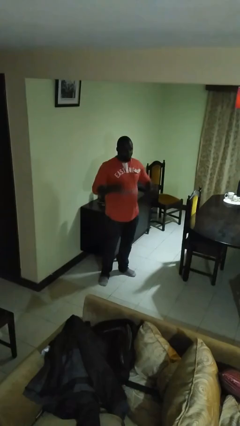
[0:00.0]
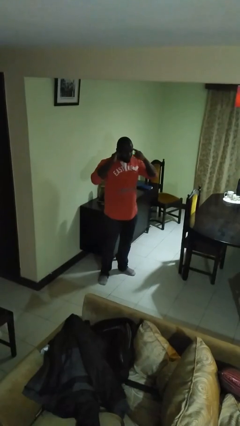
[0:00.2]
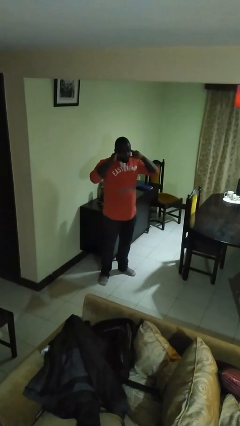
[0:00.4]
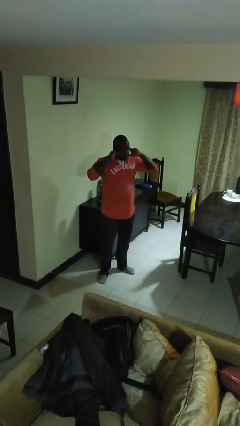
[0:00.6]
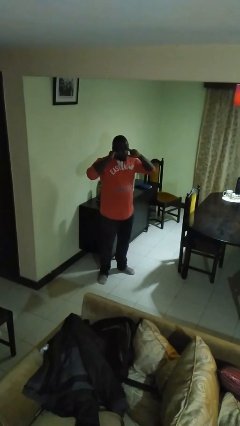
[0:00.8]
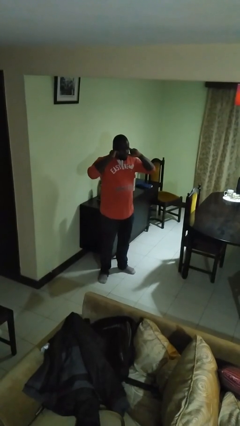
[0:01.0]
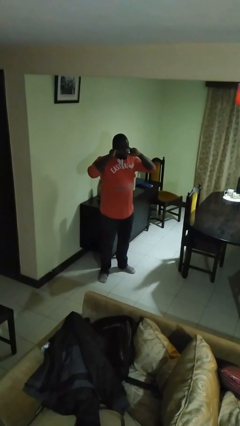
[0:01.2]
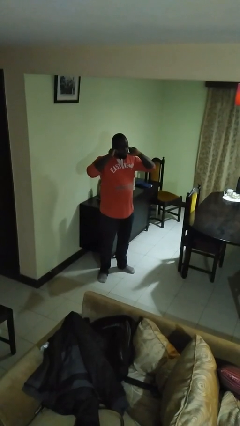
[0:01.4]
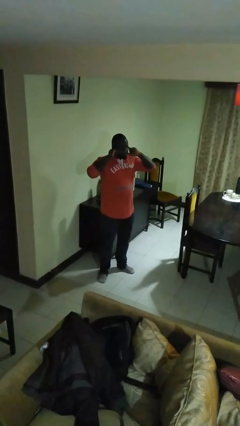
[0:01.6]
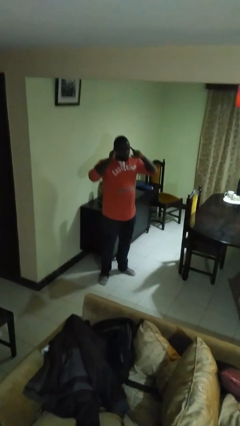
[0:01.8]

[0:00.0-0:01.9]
person puts fingers in ear

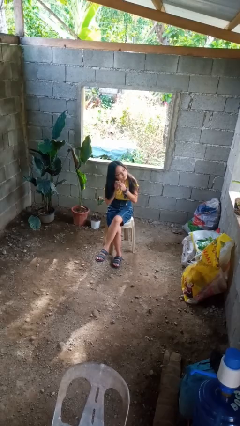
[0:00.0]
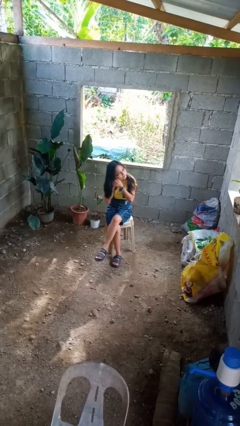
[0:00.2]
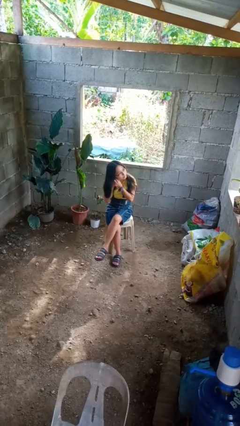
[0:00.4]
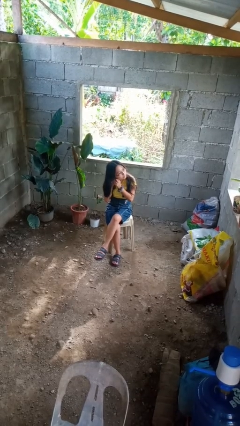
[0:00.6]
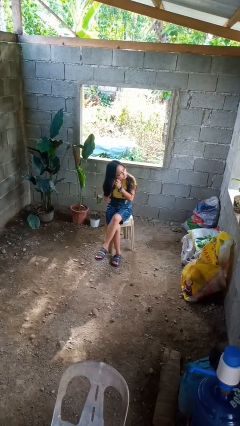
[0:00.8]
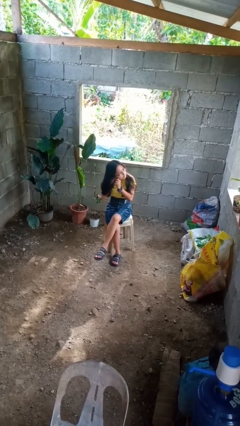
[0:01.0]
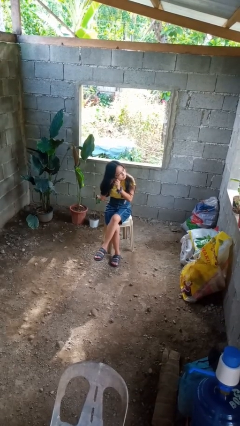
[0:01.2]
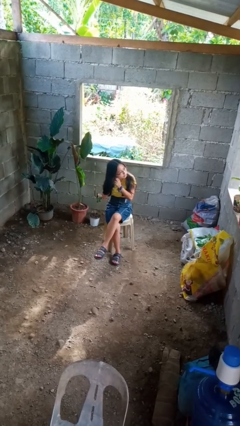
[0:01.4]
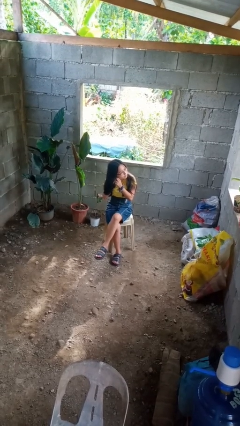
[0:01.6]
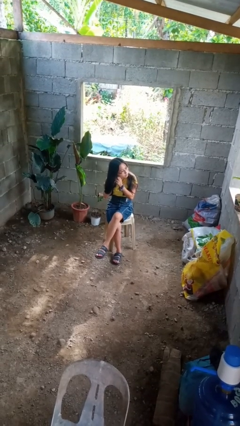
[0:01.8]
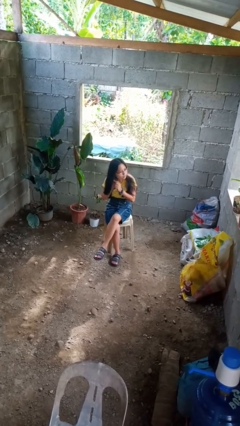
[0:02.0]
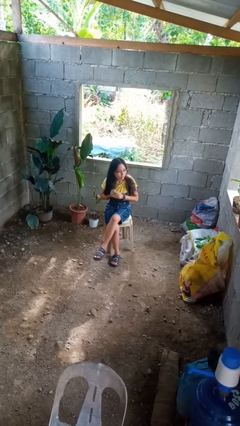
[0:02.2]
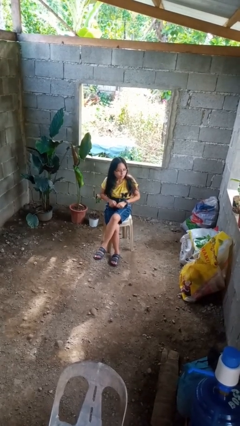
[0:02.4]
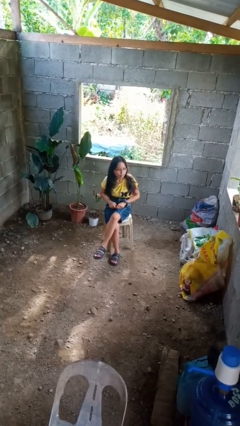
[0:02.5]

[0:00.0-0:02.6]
person puts on earrings

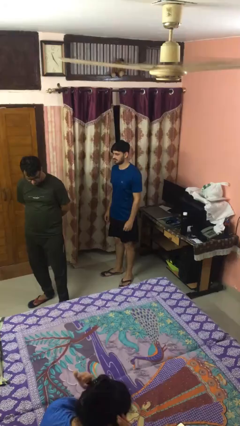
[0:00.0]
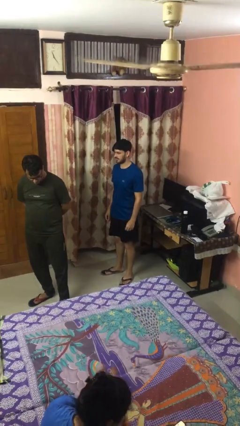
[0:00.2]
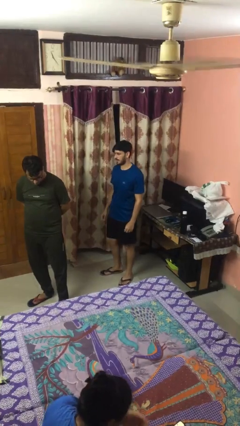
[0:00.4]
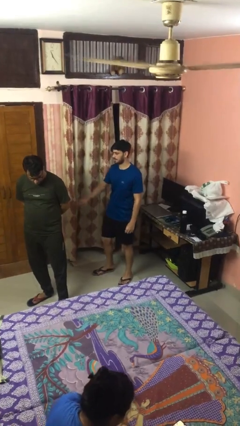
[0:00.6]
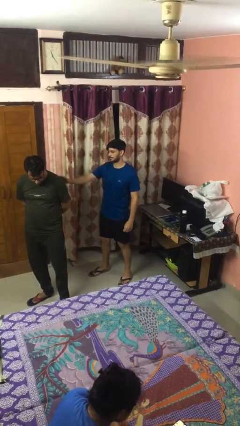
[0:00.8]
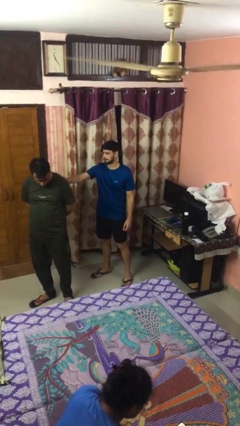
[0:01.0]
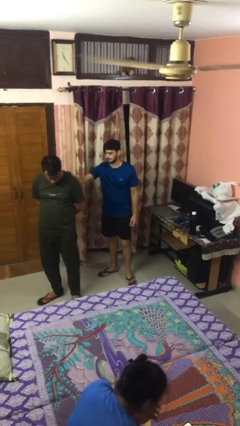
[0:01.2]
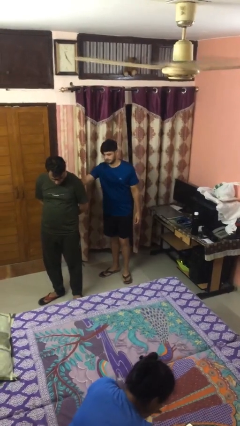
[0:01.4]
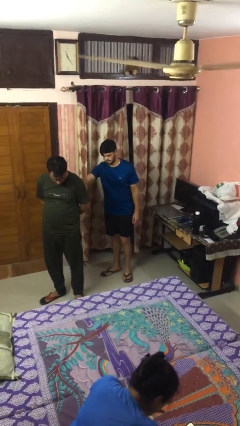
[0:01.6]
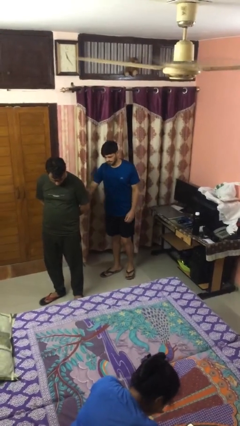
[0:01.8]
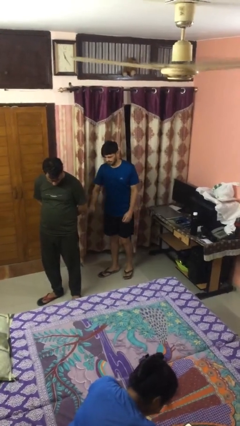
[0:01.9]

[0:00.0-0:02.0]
person touches back of person

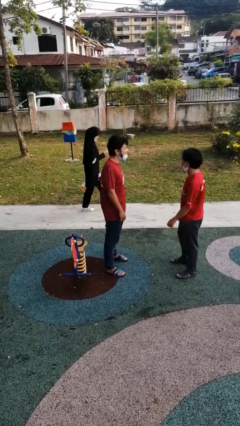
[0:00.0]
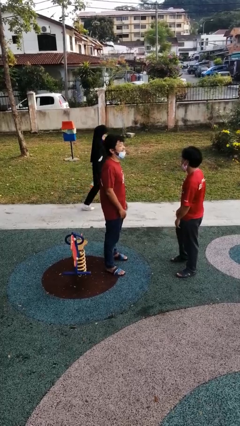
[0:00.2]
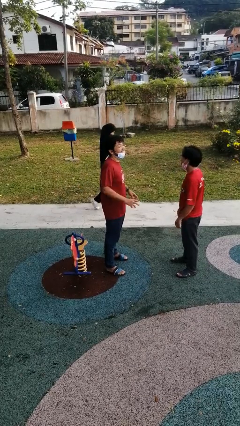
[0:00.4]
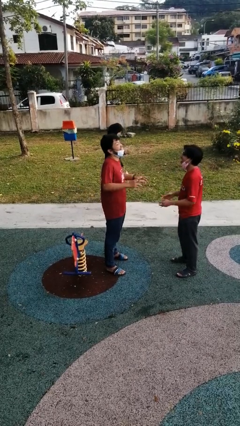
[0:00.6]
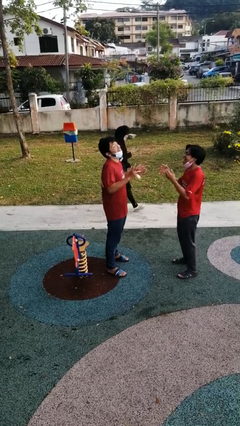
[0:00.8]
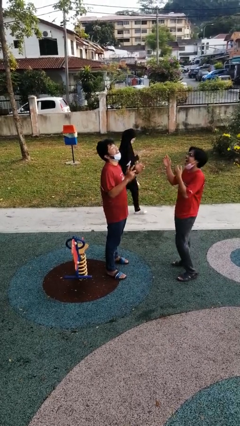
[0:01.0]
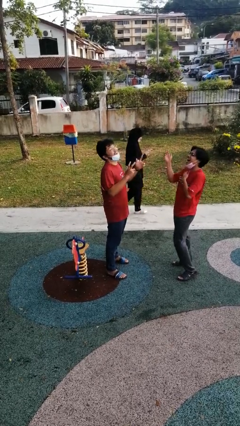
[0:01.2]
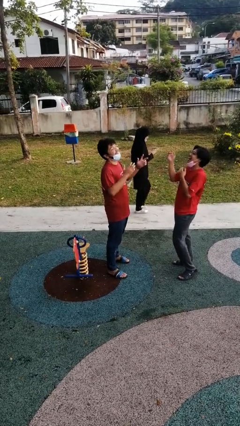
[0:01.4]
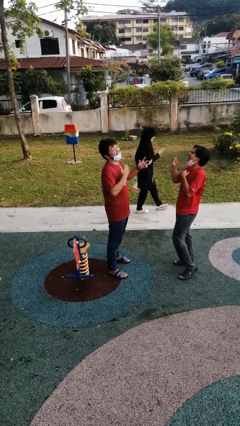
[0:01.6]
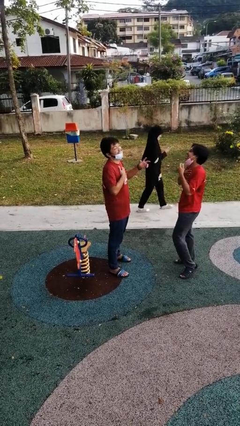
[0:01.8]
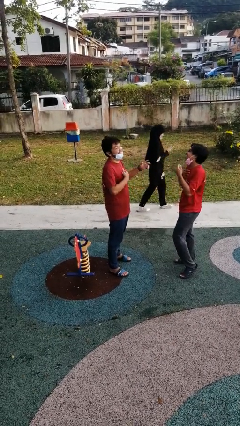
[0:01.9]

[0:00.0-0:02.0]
person laughs with person

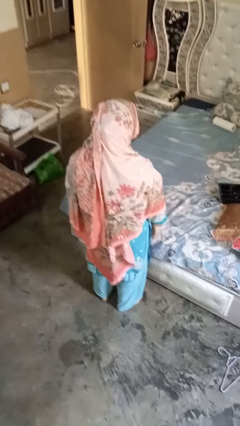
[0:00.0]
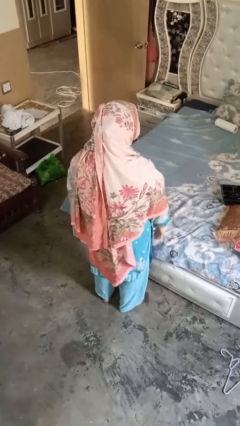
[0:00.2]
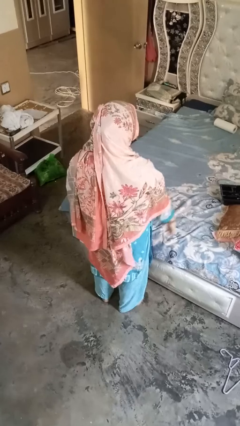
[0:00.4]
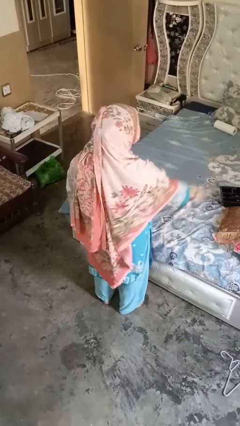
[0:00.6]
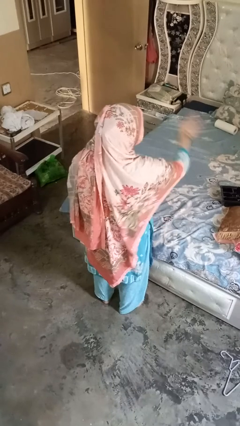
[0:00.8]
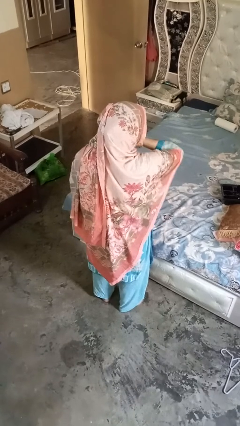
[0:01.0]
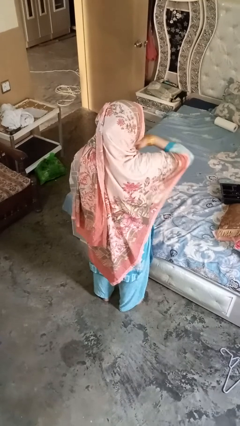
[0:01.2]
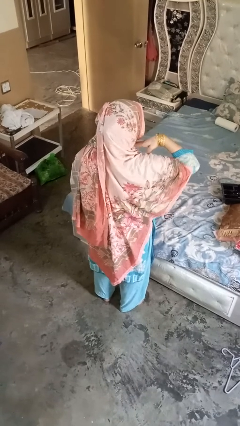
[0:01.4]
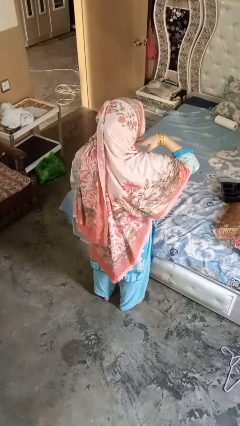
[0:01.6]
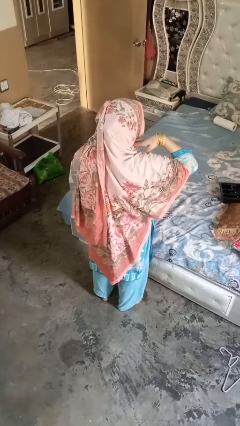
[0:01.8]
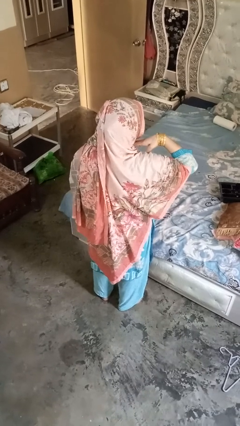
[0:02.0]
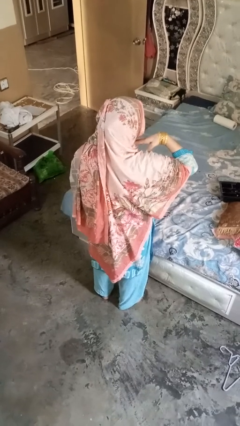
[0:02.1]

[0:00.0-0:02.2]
person gestures cut

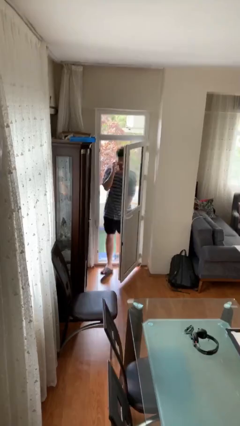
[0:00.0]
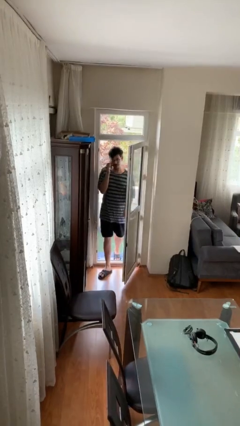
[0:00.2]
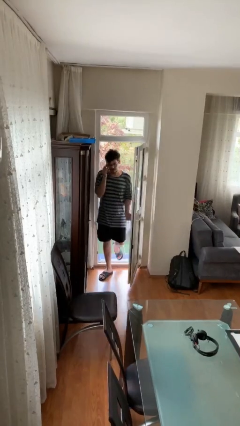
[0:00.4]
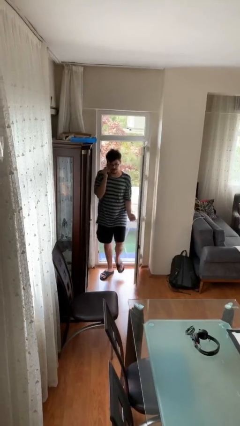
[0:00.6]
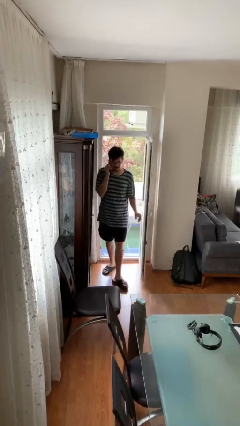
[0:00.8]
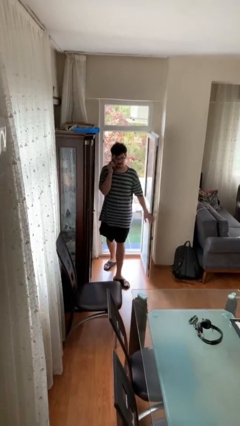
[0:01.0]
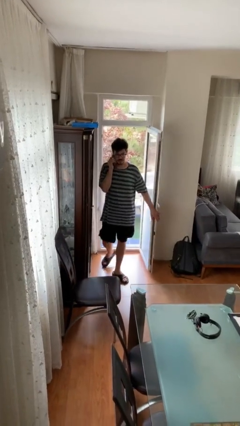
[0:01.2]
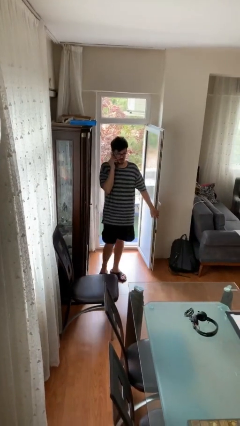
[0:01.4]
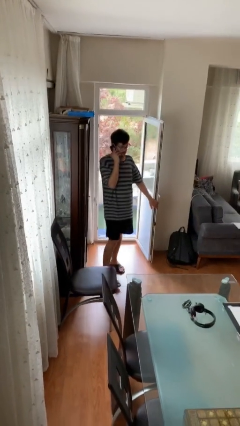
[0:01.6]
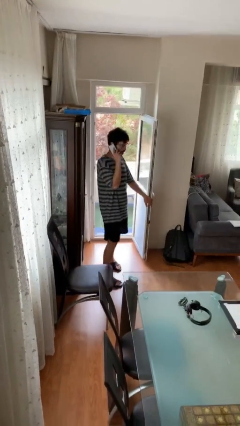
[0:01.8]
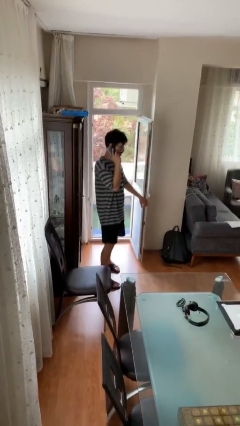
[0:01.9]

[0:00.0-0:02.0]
person enters scene through structure

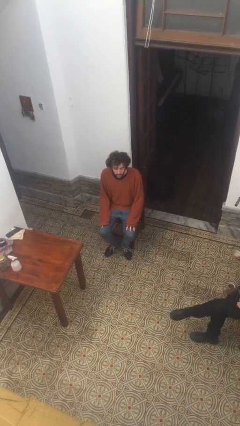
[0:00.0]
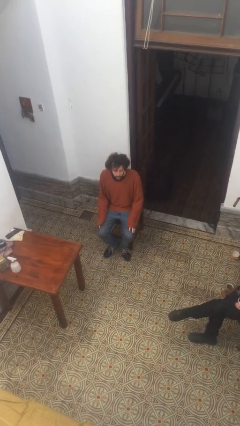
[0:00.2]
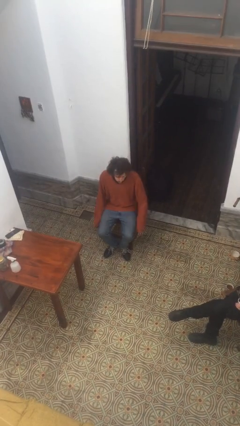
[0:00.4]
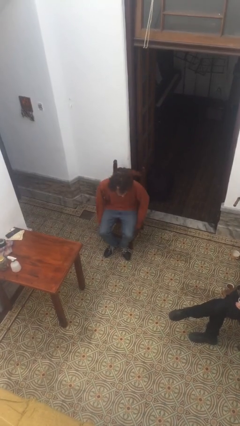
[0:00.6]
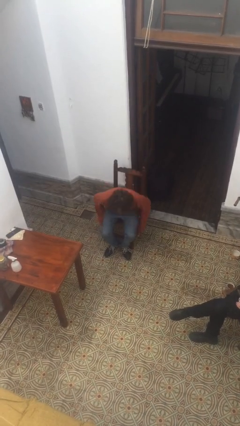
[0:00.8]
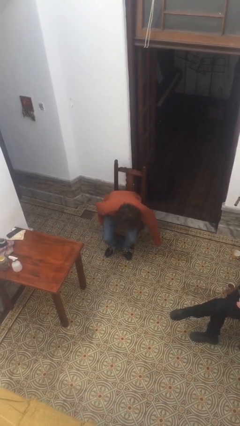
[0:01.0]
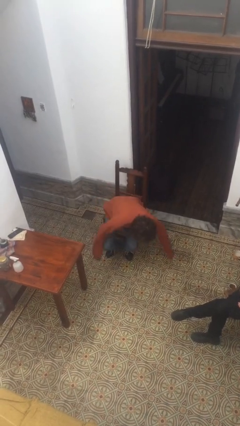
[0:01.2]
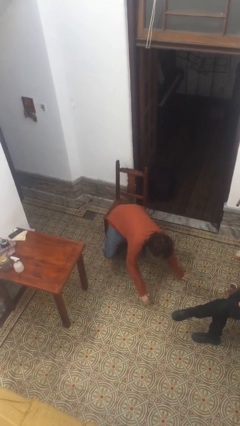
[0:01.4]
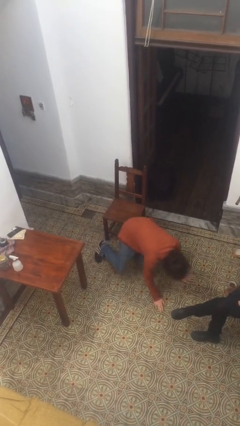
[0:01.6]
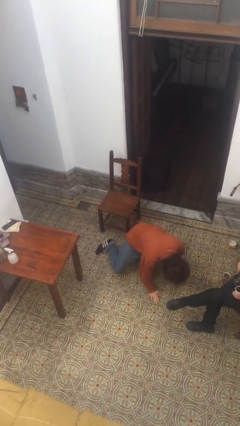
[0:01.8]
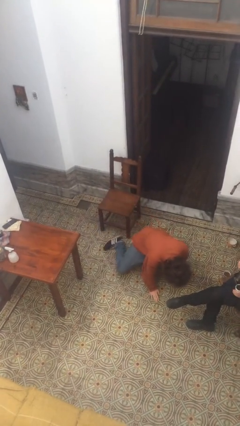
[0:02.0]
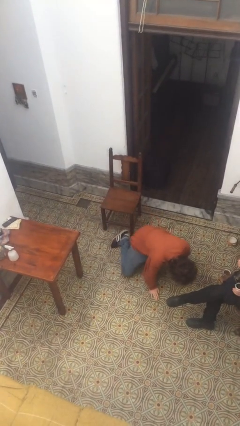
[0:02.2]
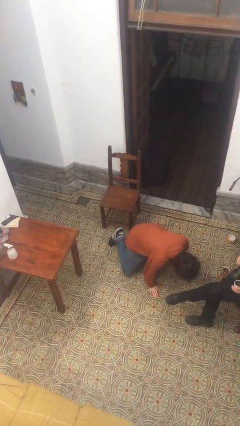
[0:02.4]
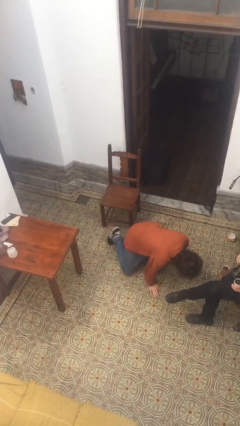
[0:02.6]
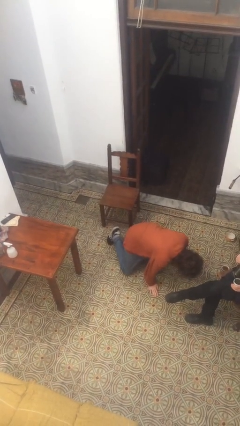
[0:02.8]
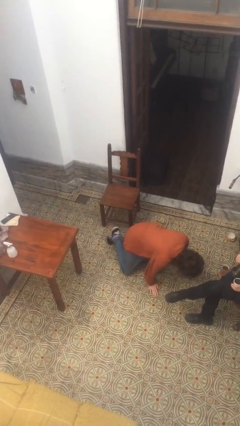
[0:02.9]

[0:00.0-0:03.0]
person falls from chair

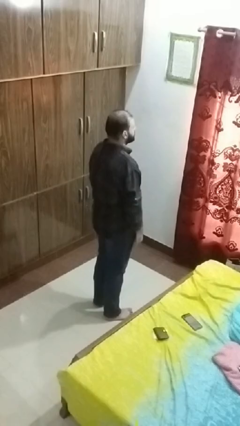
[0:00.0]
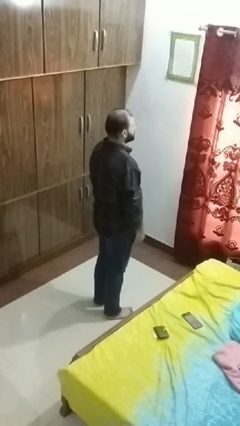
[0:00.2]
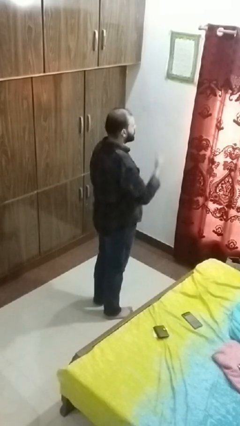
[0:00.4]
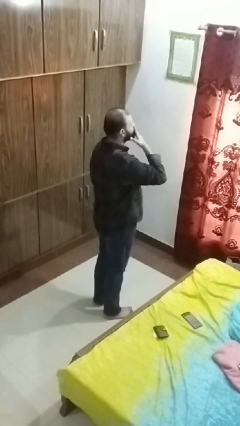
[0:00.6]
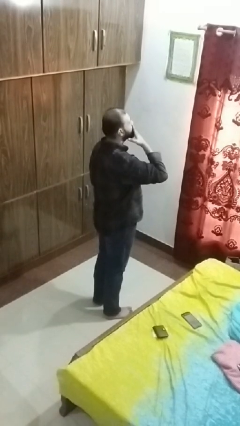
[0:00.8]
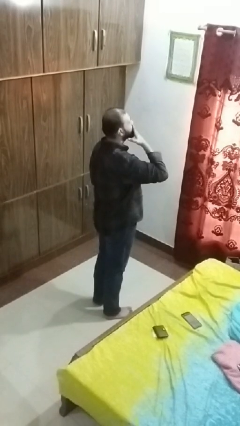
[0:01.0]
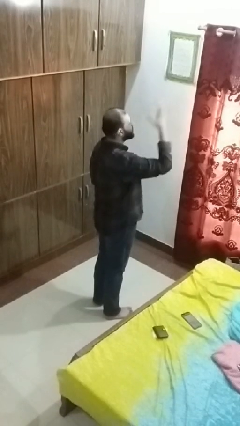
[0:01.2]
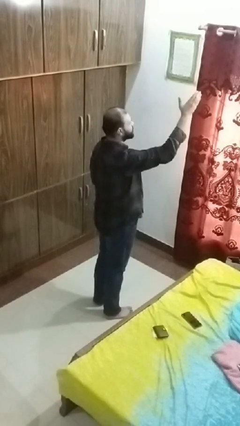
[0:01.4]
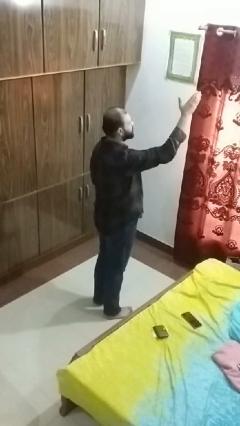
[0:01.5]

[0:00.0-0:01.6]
person gestures blow kiss
